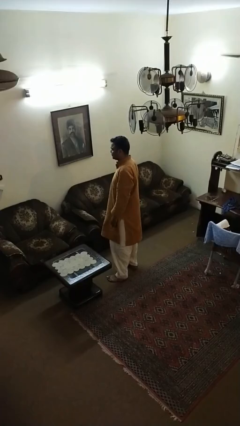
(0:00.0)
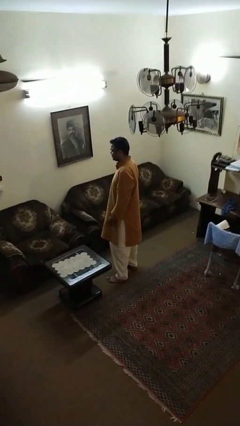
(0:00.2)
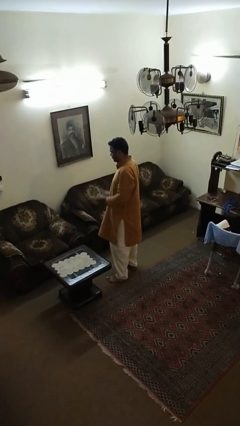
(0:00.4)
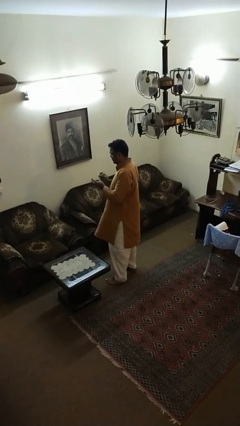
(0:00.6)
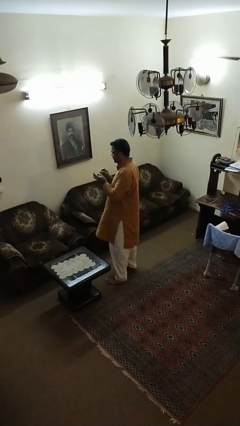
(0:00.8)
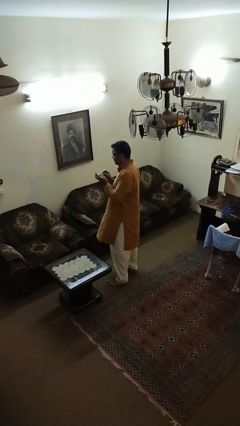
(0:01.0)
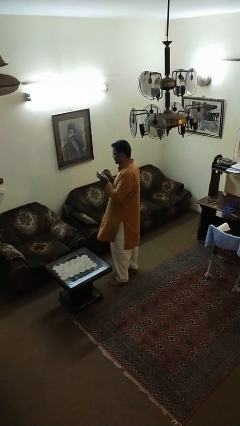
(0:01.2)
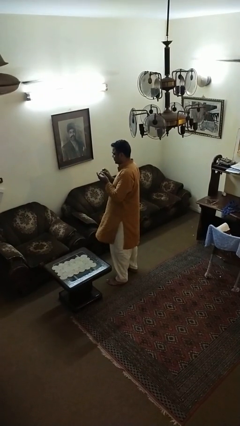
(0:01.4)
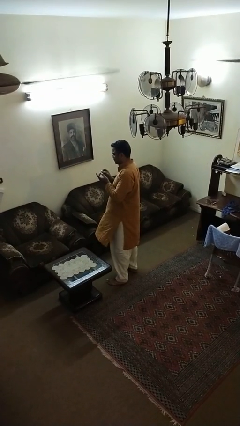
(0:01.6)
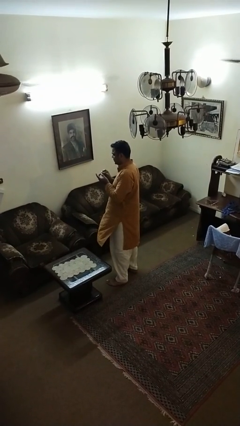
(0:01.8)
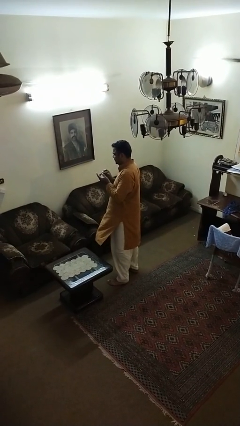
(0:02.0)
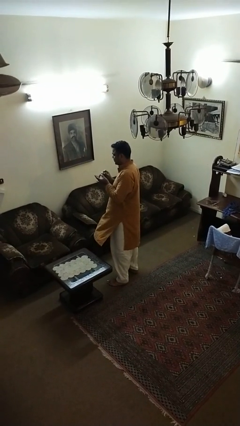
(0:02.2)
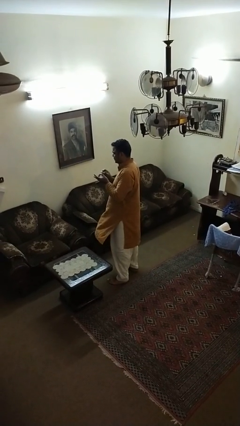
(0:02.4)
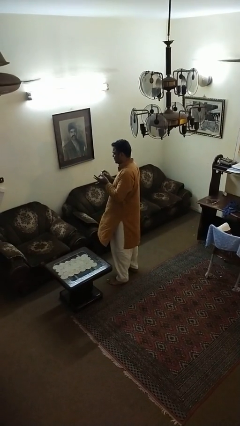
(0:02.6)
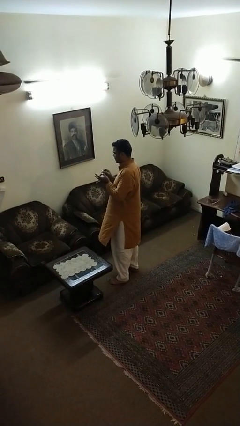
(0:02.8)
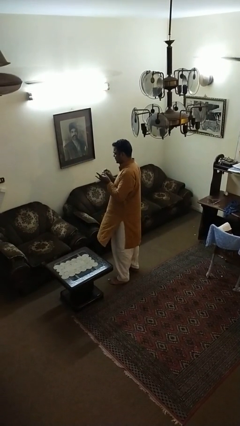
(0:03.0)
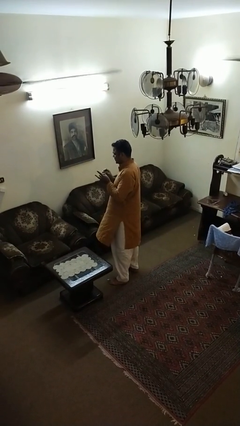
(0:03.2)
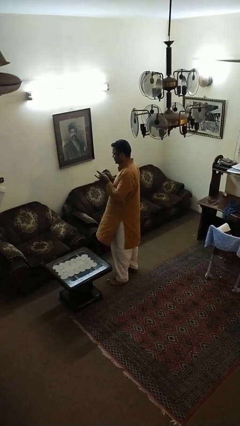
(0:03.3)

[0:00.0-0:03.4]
person clips fingernails

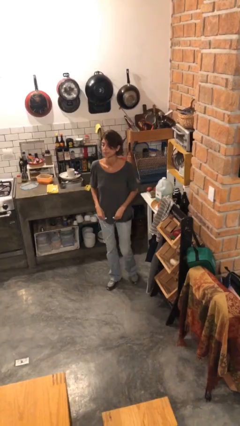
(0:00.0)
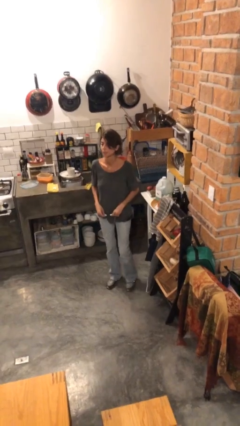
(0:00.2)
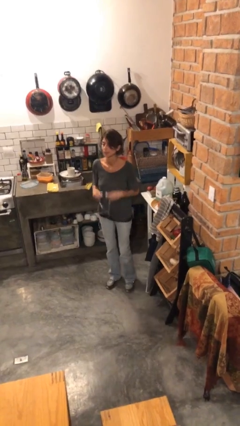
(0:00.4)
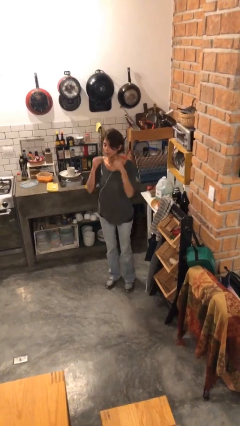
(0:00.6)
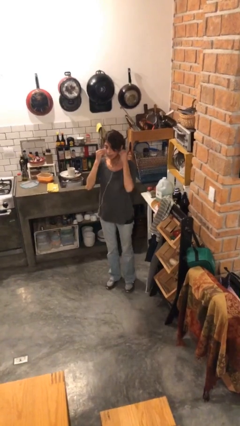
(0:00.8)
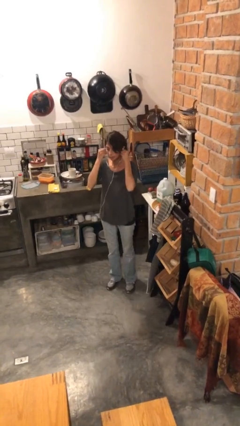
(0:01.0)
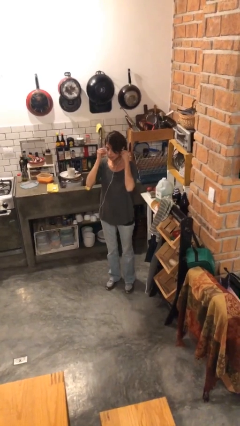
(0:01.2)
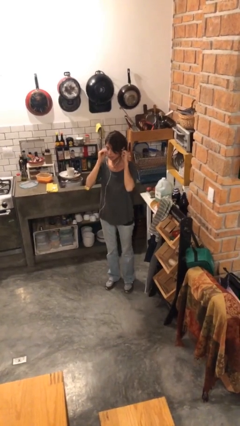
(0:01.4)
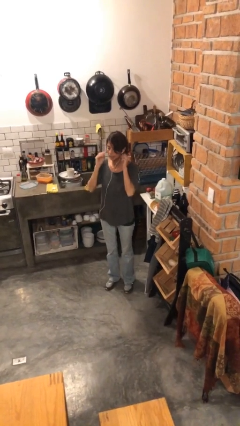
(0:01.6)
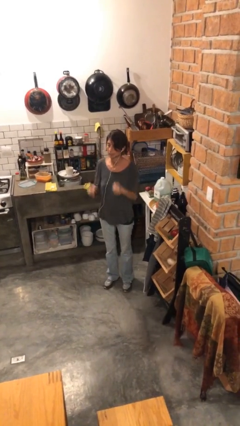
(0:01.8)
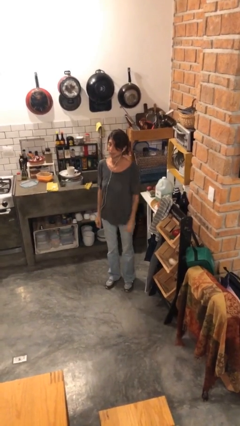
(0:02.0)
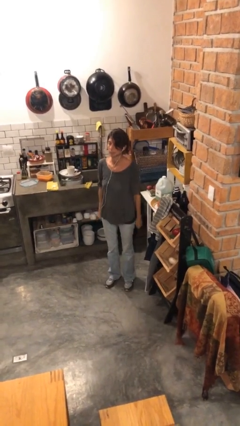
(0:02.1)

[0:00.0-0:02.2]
person puts on headphones

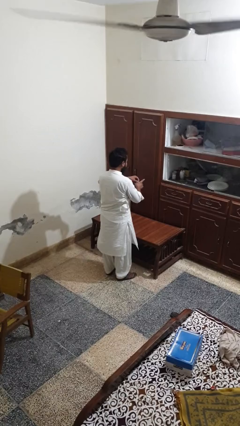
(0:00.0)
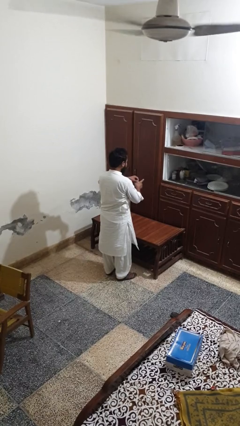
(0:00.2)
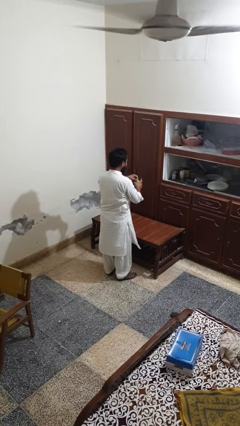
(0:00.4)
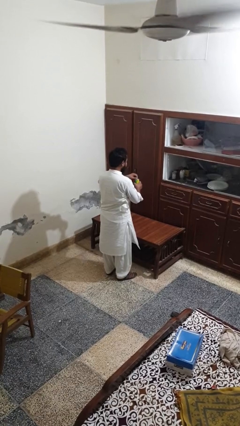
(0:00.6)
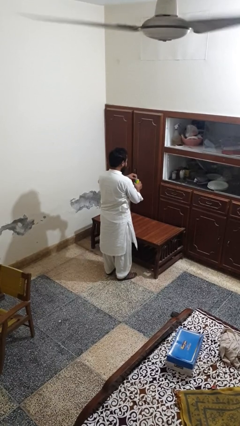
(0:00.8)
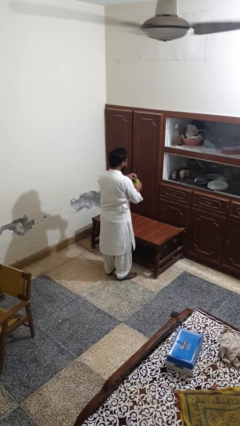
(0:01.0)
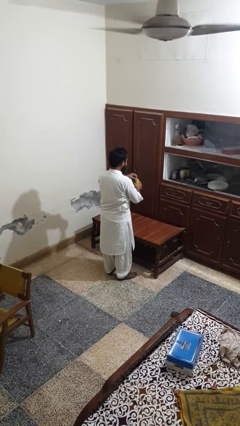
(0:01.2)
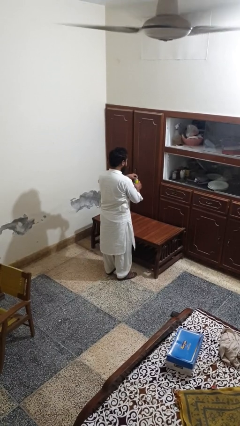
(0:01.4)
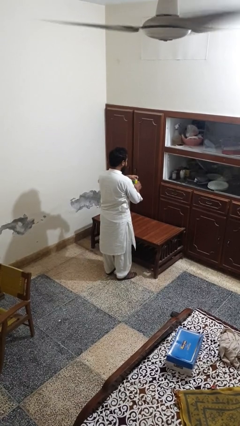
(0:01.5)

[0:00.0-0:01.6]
person opens beverage can

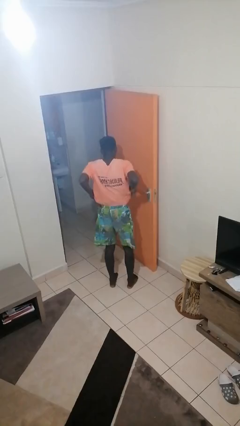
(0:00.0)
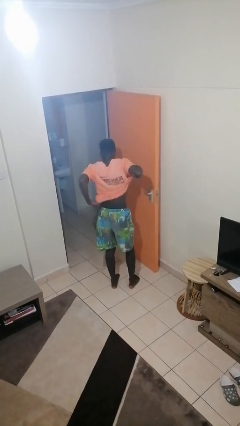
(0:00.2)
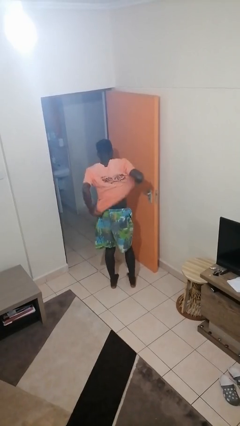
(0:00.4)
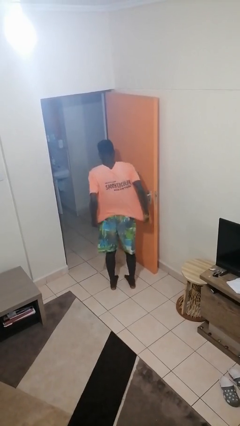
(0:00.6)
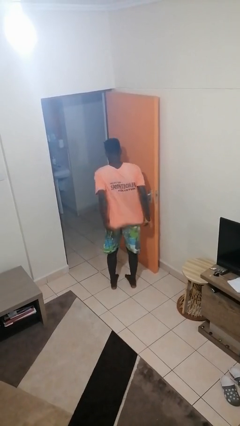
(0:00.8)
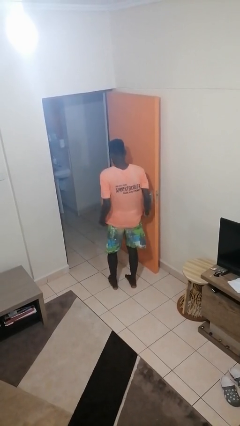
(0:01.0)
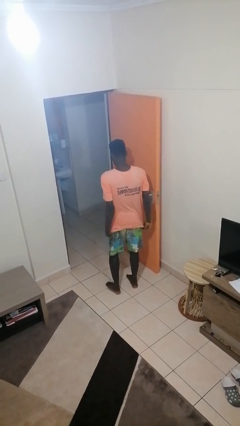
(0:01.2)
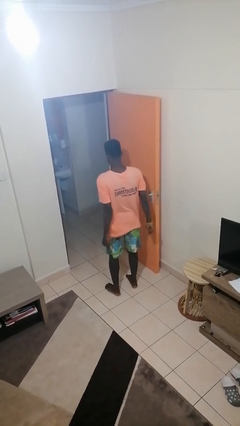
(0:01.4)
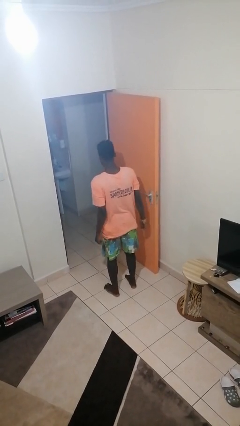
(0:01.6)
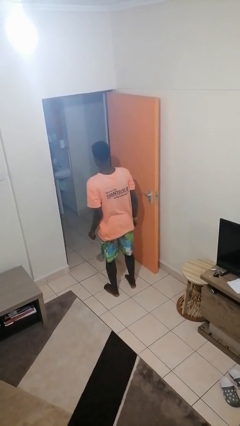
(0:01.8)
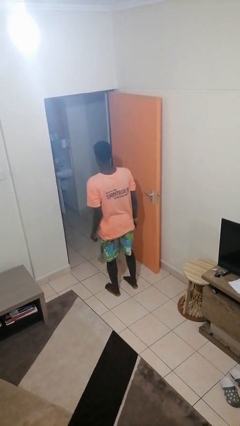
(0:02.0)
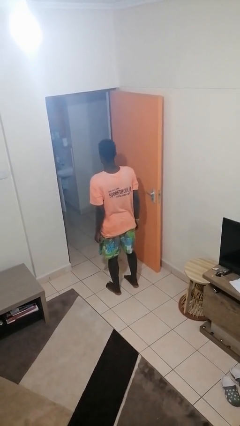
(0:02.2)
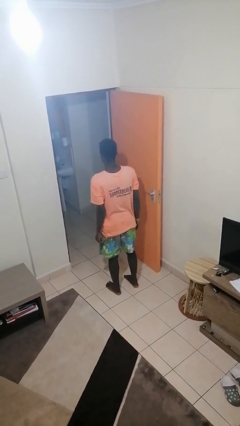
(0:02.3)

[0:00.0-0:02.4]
person untucks shirt

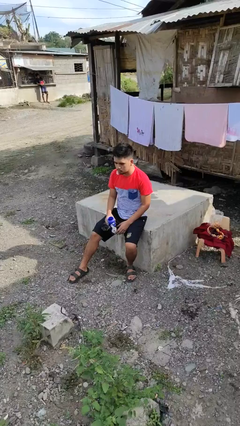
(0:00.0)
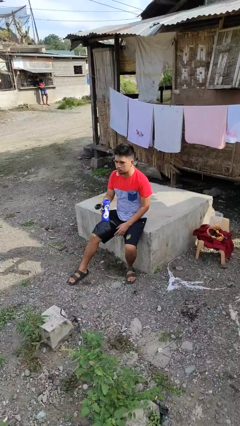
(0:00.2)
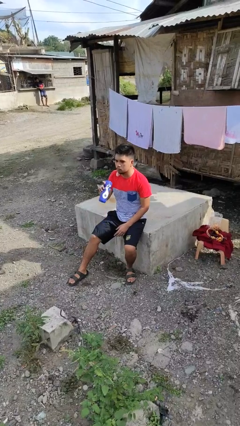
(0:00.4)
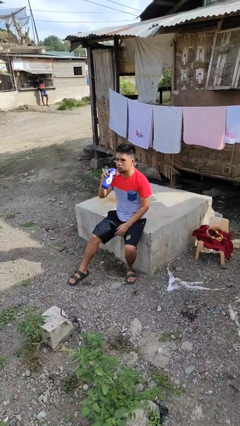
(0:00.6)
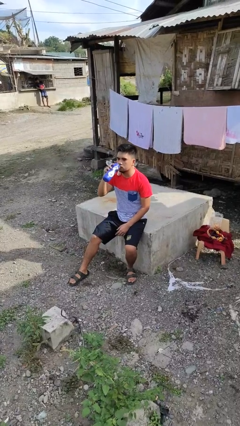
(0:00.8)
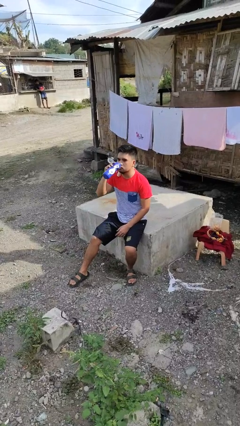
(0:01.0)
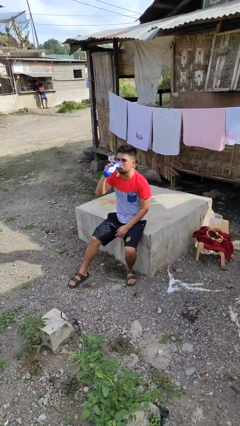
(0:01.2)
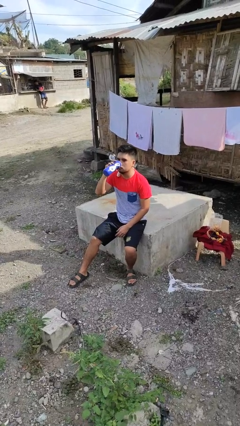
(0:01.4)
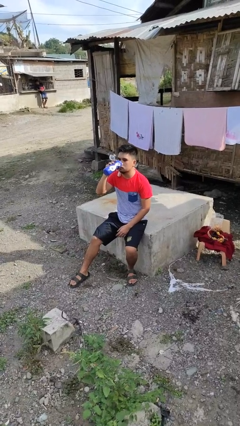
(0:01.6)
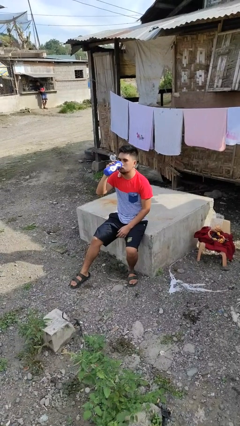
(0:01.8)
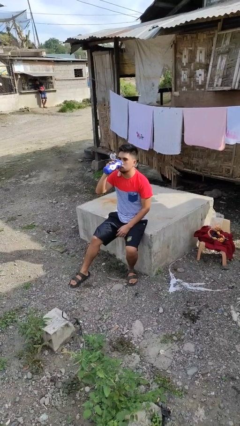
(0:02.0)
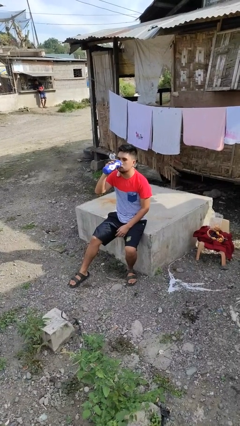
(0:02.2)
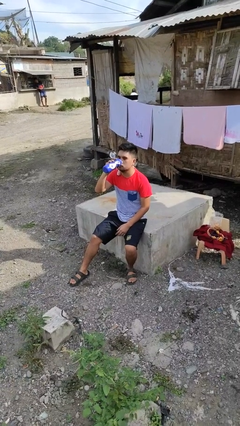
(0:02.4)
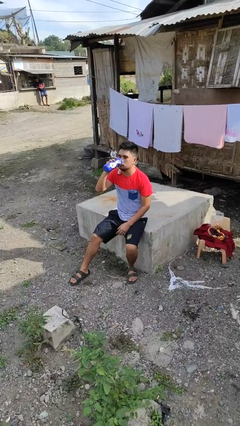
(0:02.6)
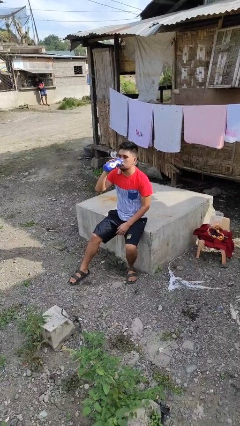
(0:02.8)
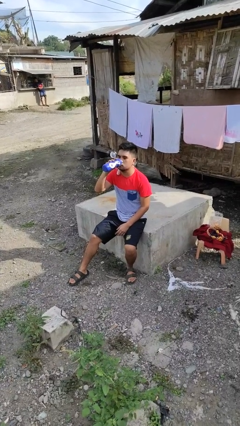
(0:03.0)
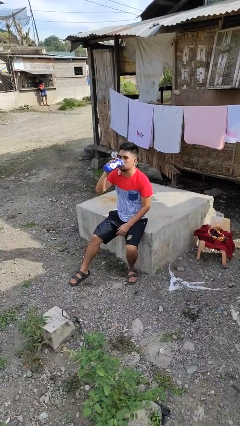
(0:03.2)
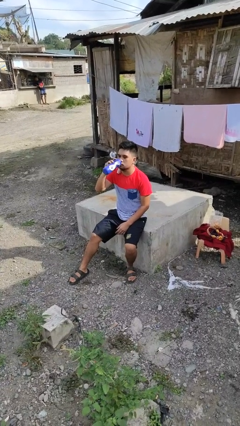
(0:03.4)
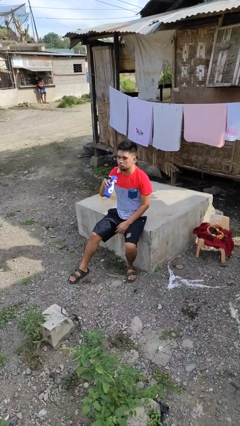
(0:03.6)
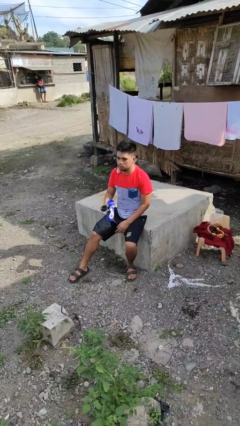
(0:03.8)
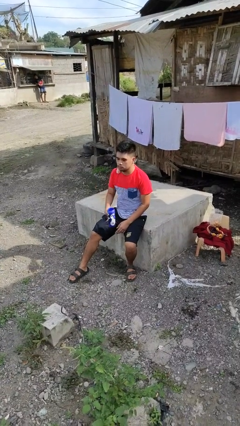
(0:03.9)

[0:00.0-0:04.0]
person drinks from bottle

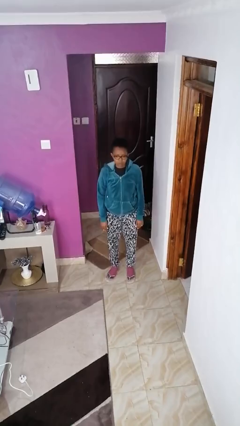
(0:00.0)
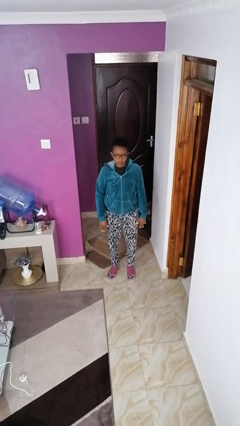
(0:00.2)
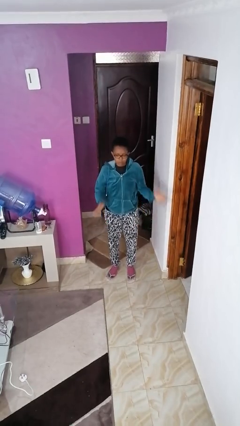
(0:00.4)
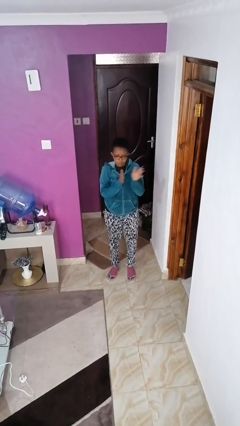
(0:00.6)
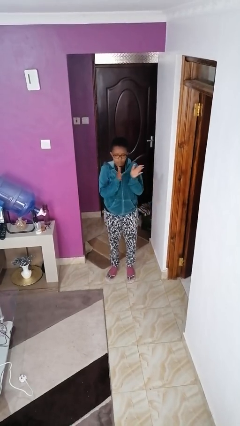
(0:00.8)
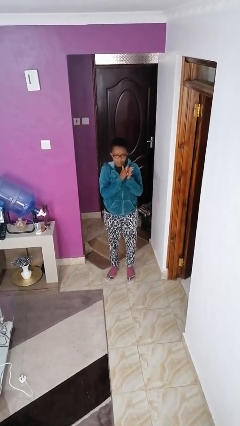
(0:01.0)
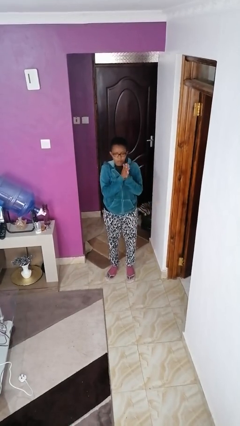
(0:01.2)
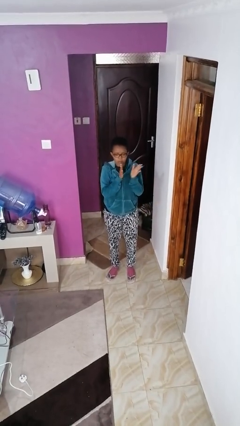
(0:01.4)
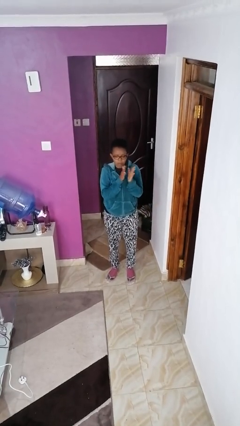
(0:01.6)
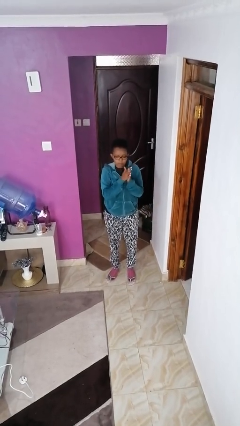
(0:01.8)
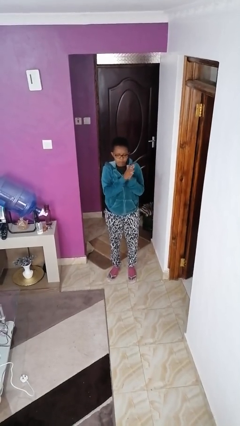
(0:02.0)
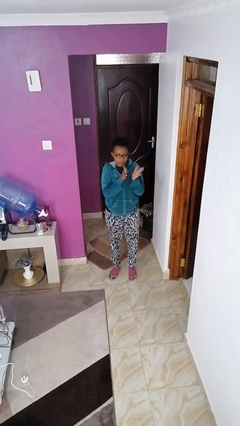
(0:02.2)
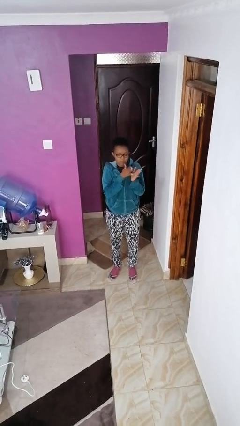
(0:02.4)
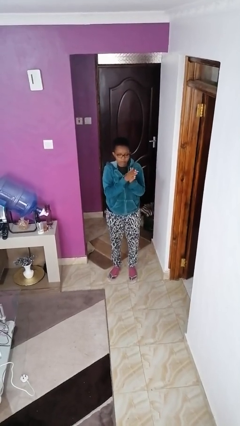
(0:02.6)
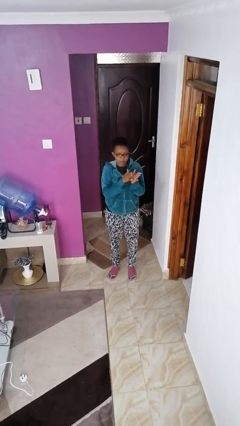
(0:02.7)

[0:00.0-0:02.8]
person claps hands

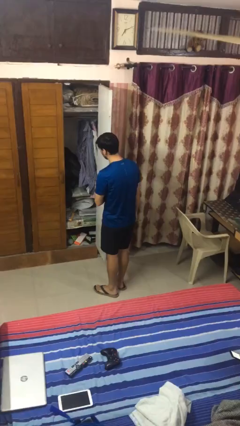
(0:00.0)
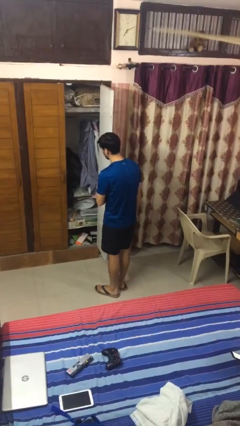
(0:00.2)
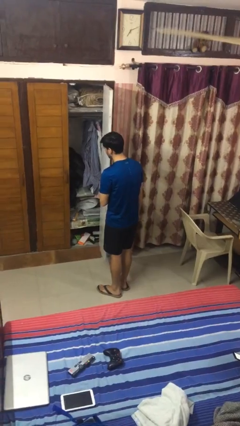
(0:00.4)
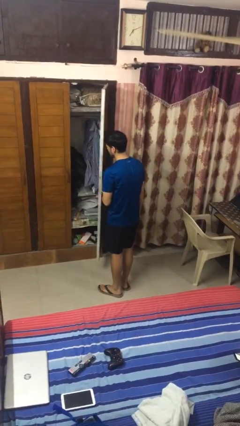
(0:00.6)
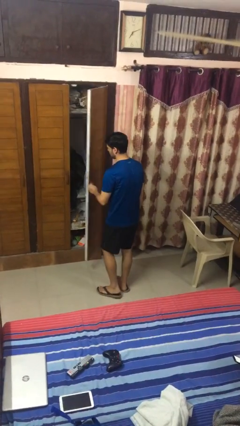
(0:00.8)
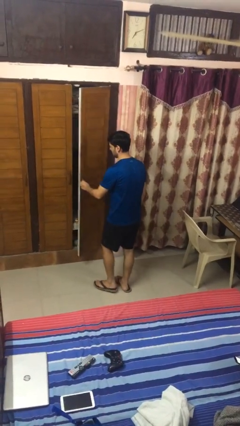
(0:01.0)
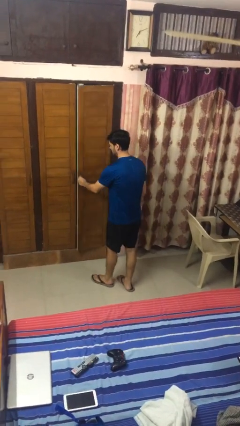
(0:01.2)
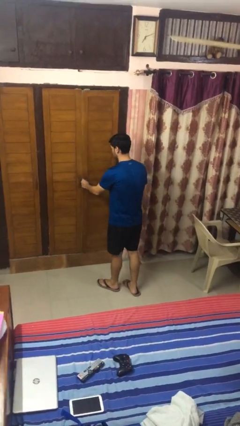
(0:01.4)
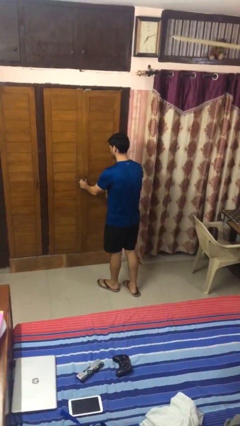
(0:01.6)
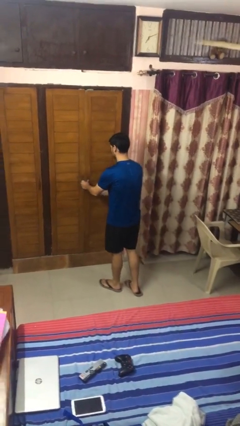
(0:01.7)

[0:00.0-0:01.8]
person closes facility door
